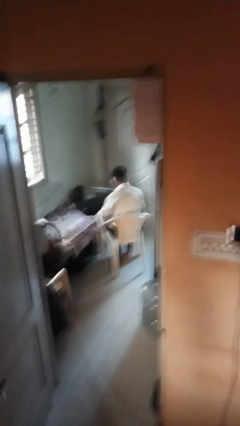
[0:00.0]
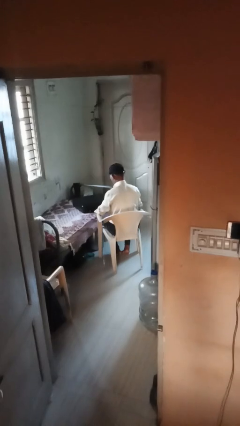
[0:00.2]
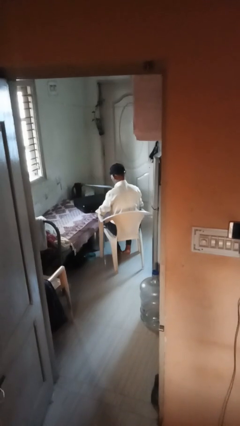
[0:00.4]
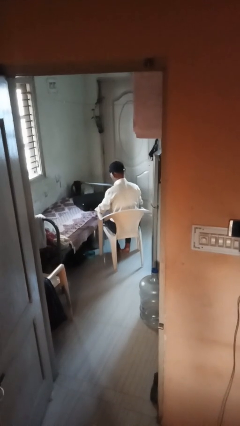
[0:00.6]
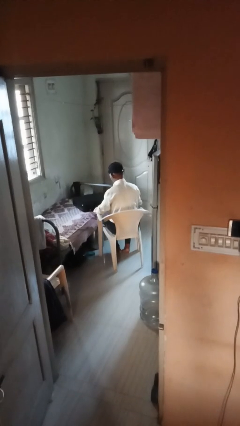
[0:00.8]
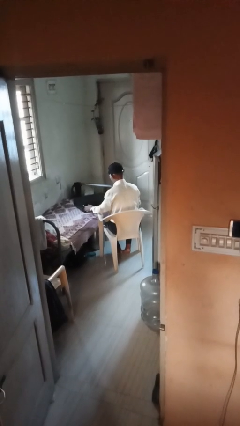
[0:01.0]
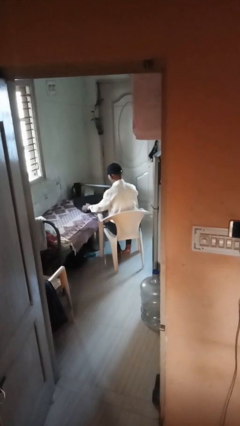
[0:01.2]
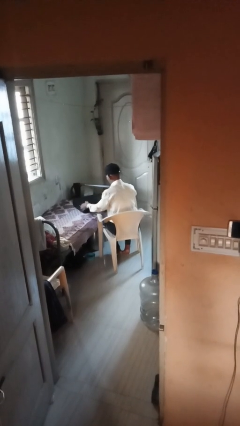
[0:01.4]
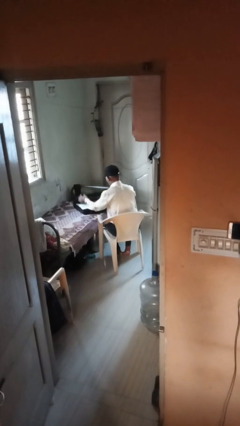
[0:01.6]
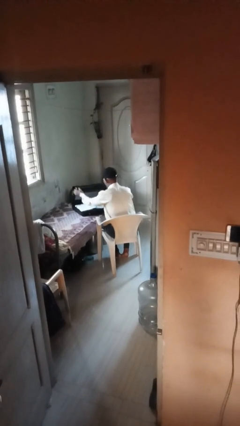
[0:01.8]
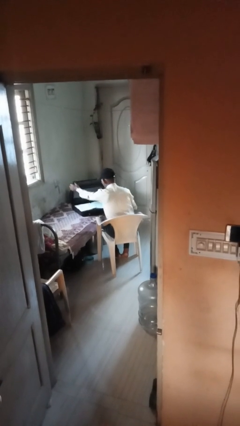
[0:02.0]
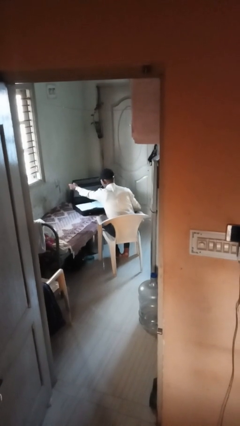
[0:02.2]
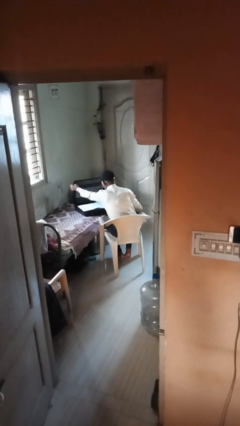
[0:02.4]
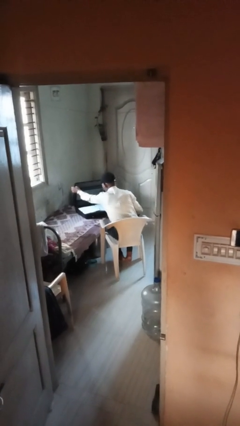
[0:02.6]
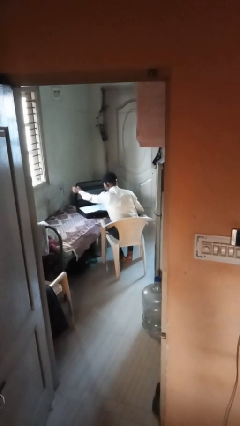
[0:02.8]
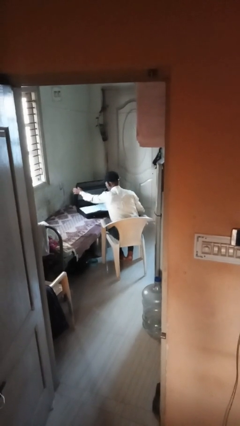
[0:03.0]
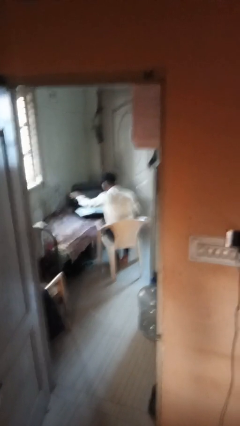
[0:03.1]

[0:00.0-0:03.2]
person opens suitcase

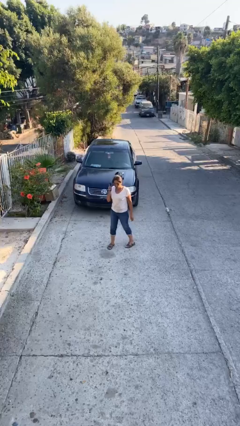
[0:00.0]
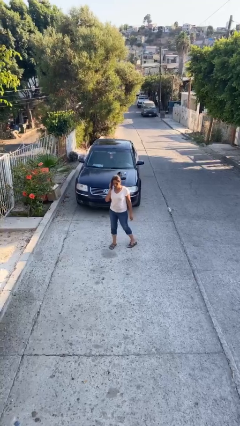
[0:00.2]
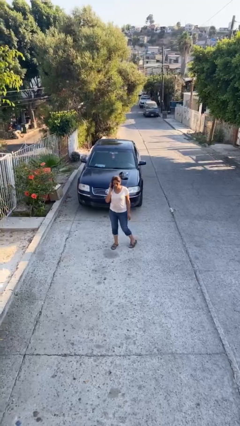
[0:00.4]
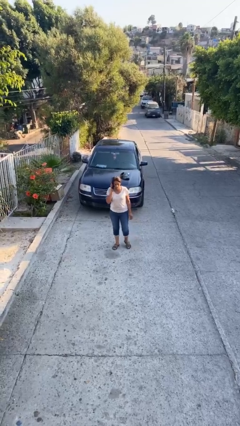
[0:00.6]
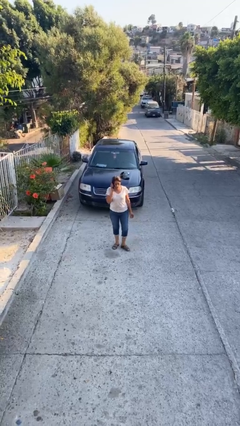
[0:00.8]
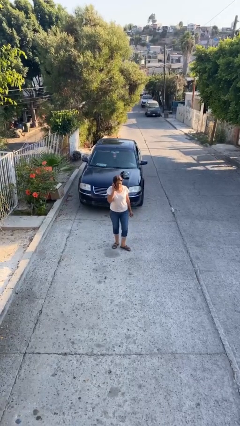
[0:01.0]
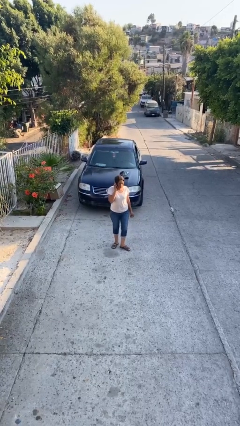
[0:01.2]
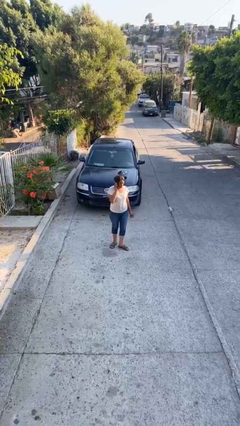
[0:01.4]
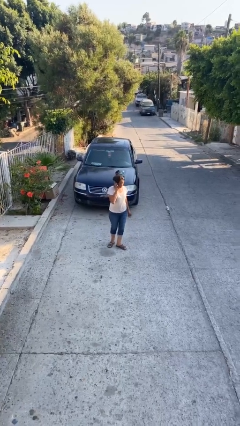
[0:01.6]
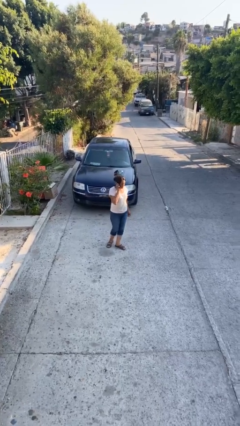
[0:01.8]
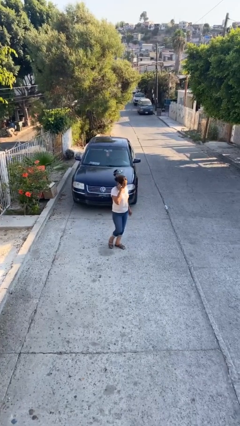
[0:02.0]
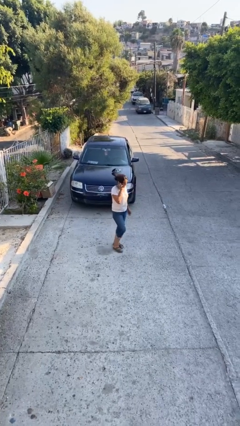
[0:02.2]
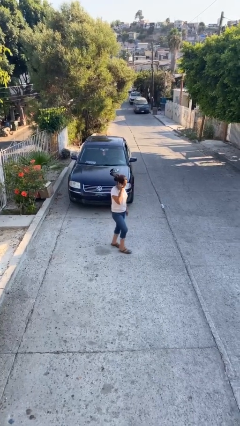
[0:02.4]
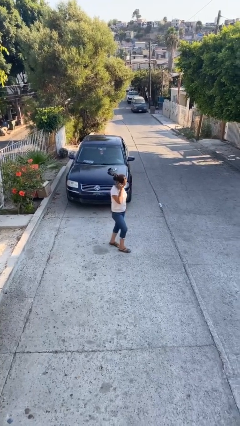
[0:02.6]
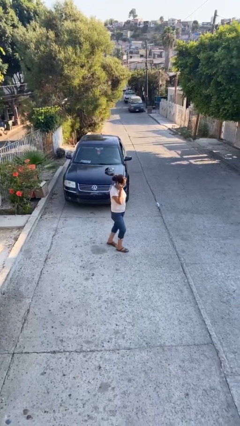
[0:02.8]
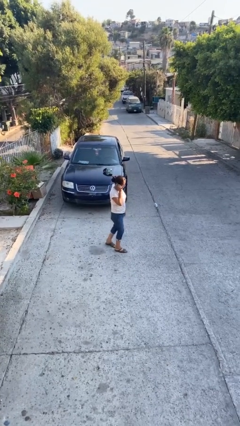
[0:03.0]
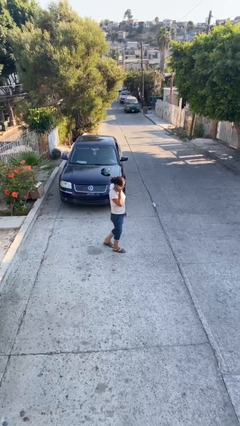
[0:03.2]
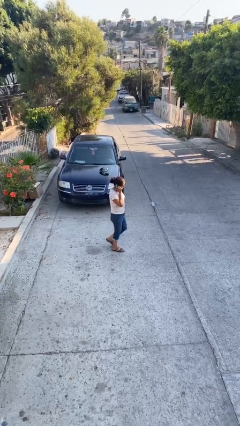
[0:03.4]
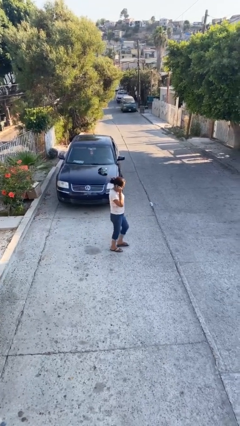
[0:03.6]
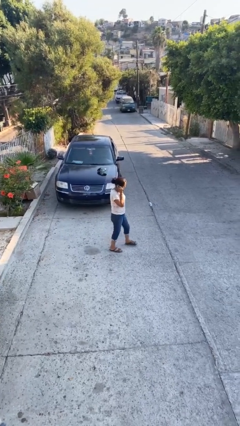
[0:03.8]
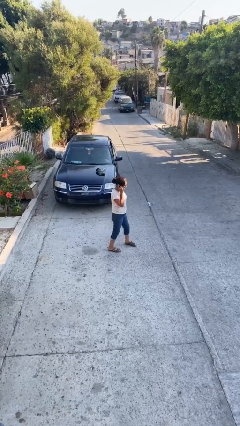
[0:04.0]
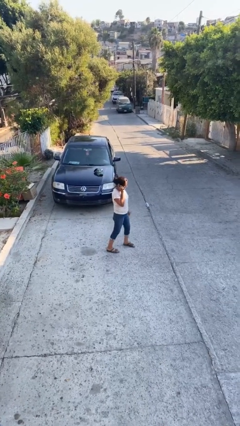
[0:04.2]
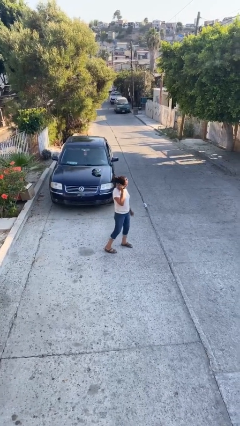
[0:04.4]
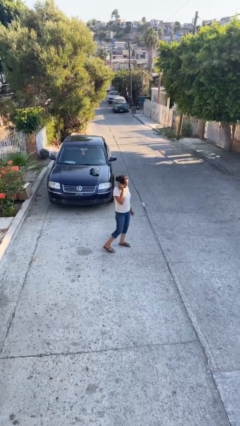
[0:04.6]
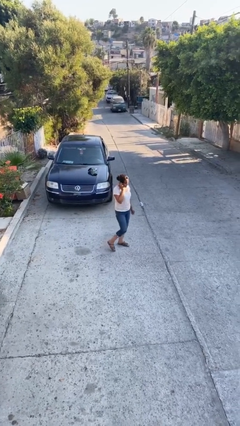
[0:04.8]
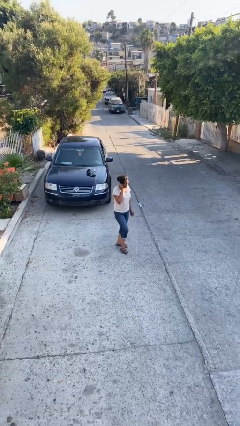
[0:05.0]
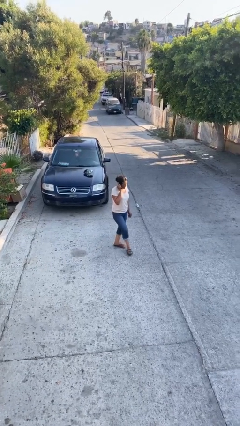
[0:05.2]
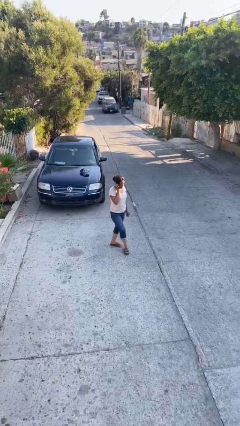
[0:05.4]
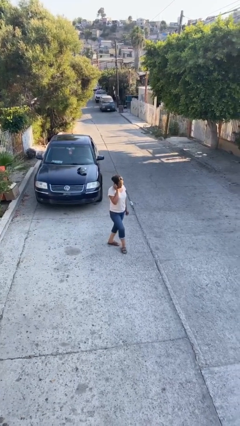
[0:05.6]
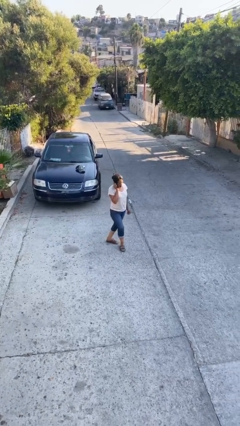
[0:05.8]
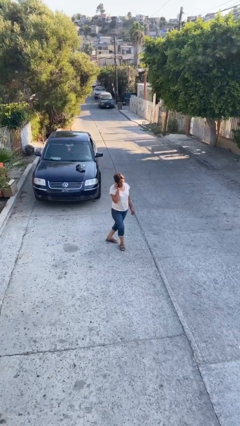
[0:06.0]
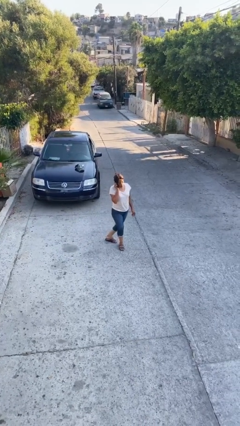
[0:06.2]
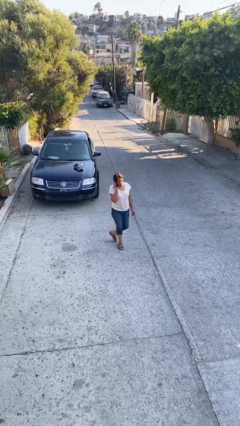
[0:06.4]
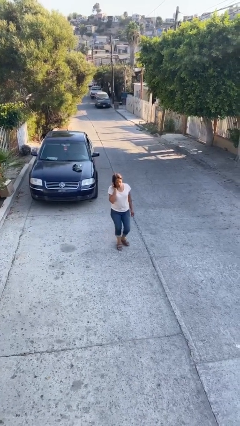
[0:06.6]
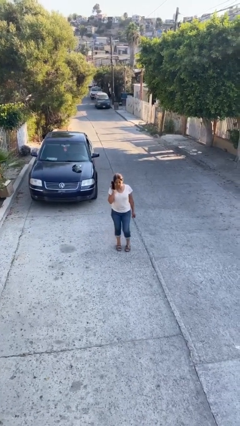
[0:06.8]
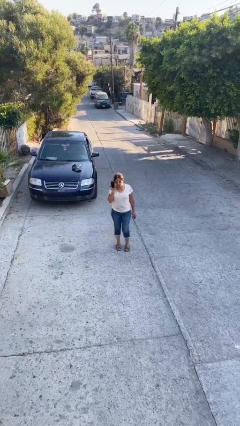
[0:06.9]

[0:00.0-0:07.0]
person talks on phone

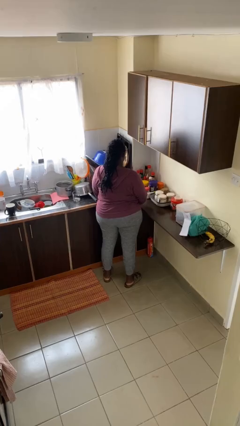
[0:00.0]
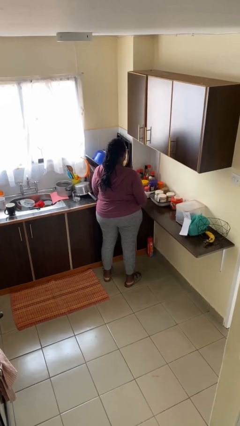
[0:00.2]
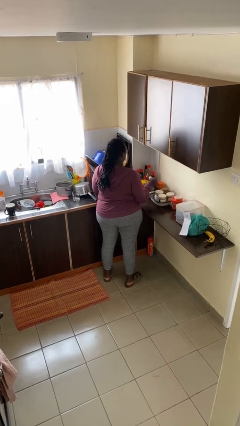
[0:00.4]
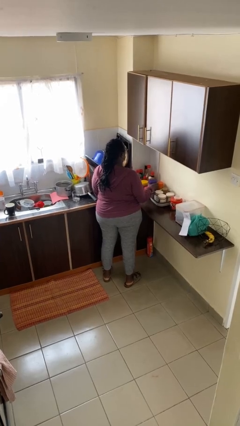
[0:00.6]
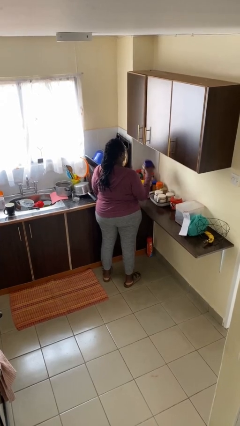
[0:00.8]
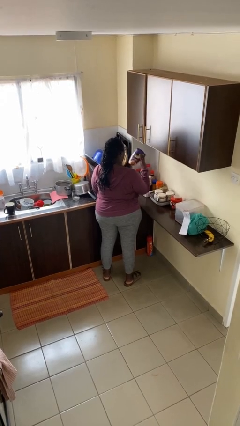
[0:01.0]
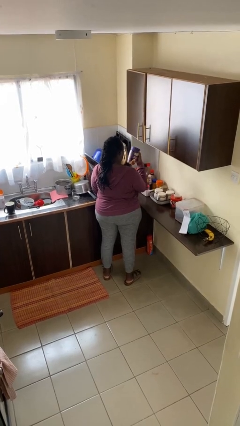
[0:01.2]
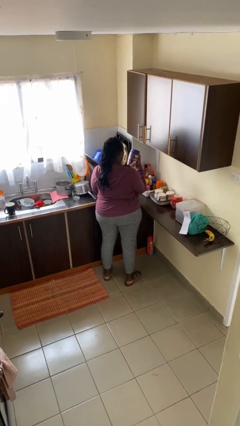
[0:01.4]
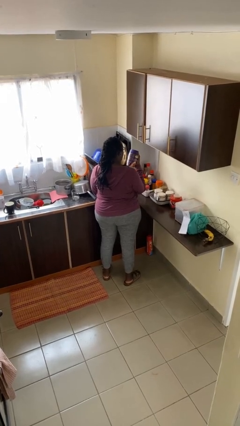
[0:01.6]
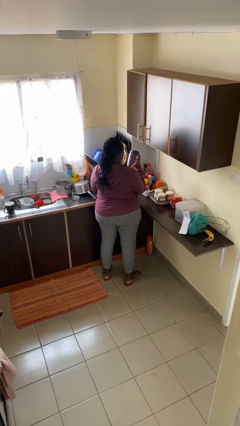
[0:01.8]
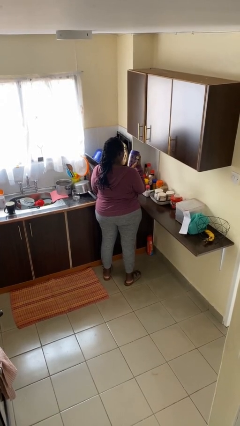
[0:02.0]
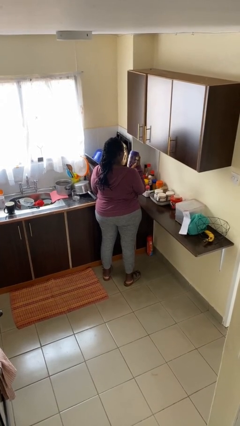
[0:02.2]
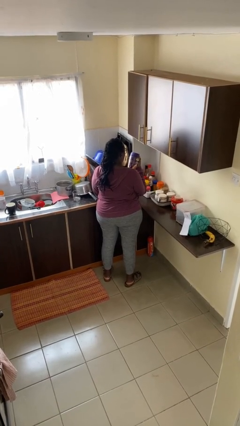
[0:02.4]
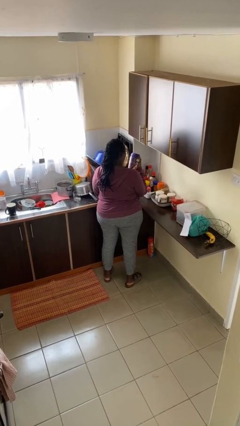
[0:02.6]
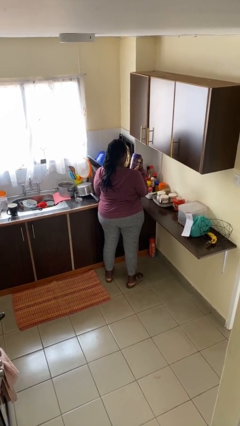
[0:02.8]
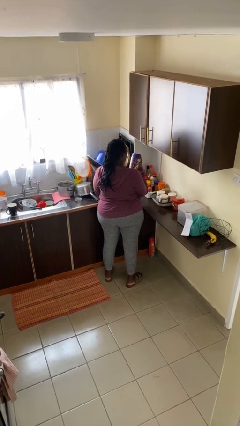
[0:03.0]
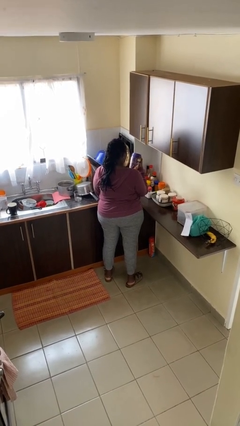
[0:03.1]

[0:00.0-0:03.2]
person picks up object from countertop

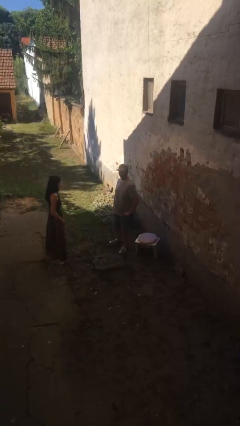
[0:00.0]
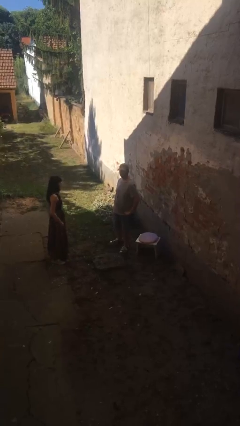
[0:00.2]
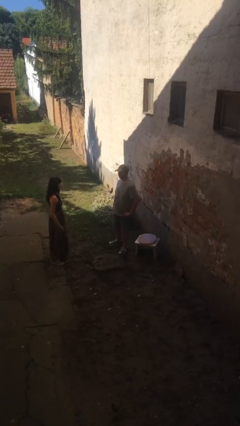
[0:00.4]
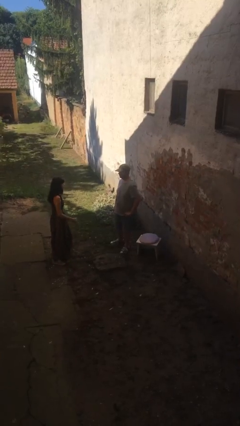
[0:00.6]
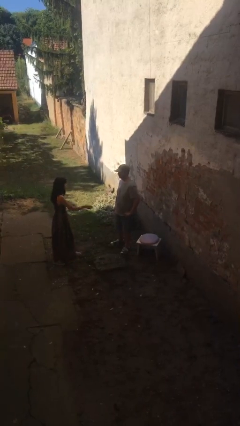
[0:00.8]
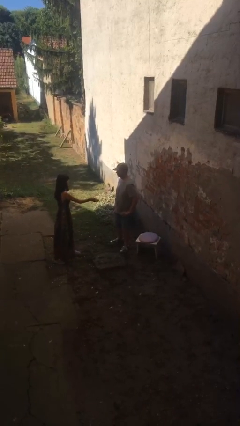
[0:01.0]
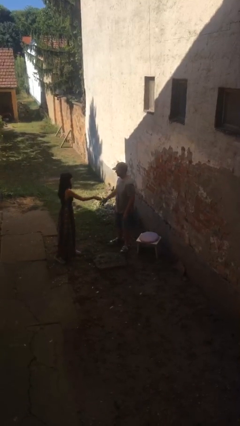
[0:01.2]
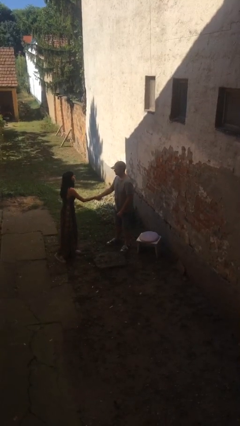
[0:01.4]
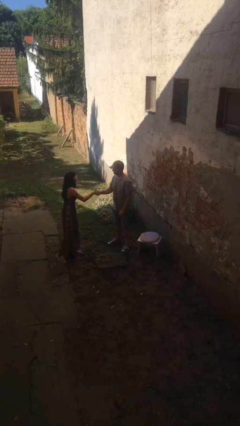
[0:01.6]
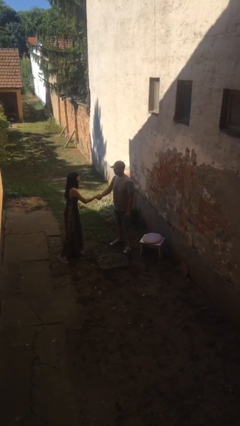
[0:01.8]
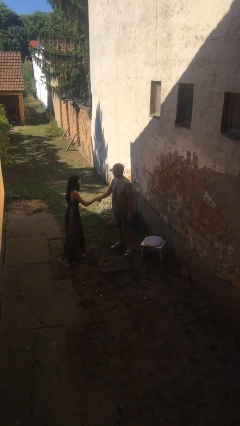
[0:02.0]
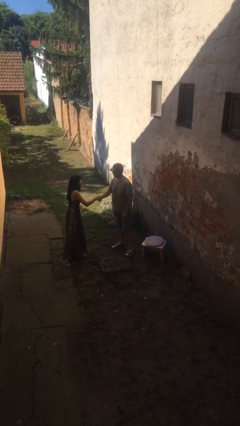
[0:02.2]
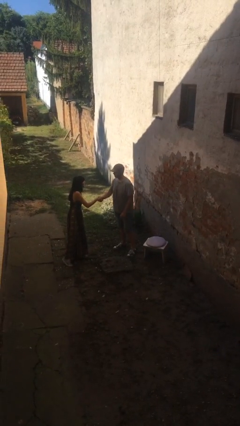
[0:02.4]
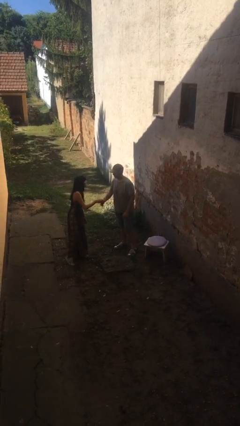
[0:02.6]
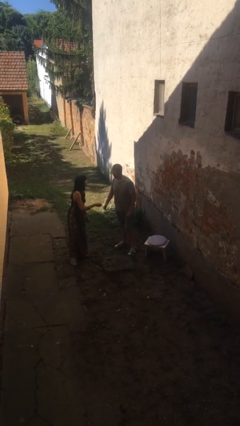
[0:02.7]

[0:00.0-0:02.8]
person shakes hand

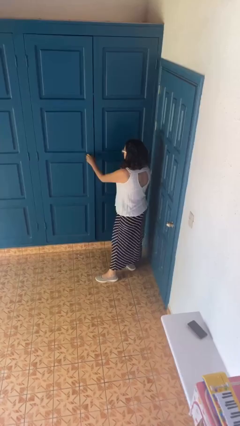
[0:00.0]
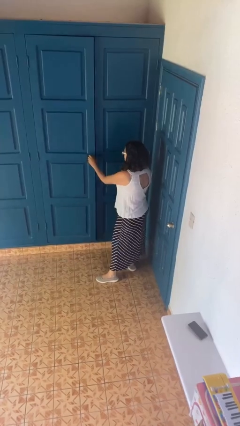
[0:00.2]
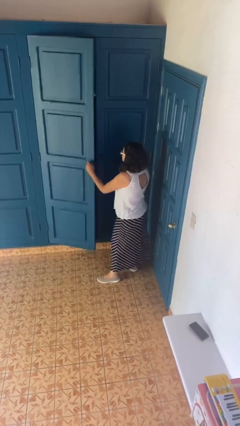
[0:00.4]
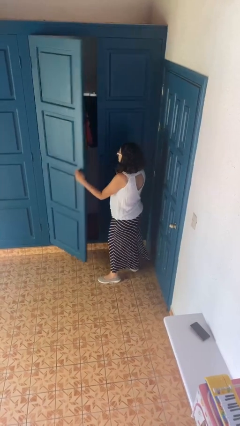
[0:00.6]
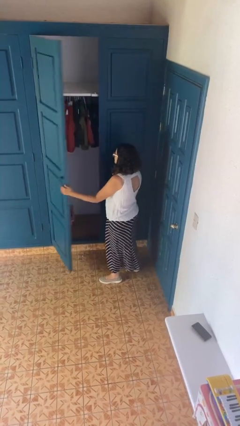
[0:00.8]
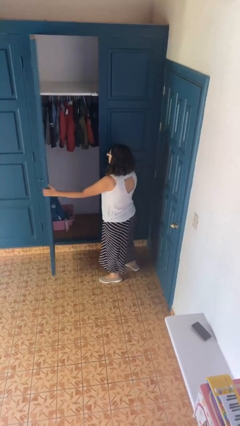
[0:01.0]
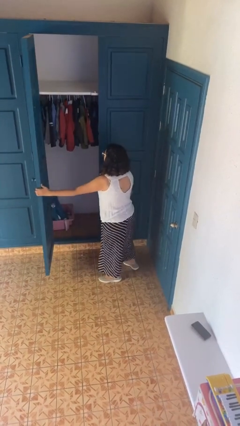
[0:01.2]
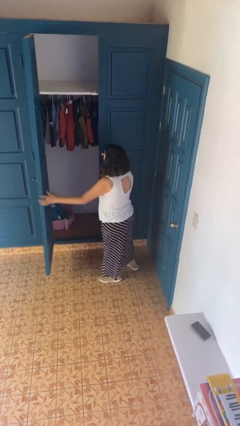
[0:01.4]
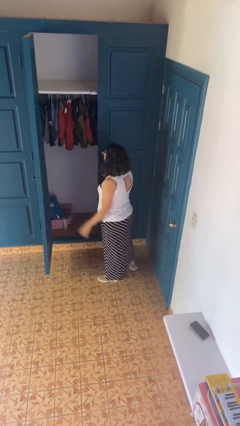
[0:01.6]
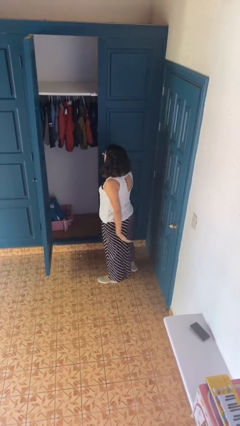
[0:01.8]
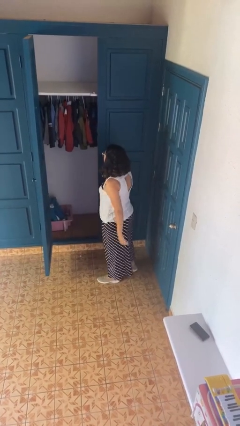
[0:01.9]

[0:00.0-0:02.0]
person opens closet door
